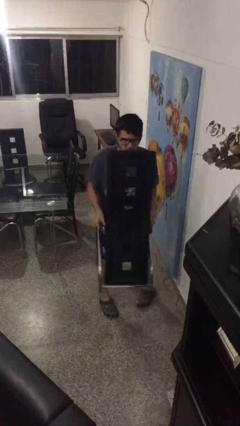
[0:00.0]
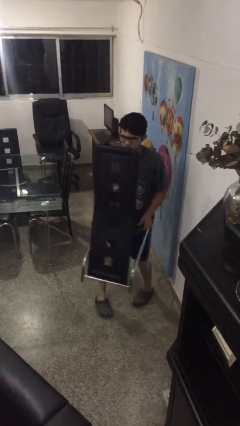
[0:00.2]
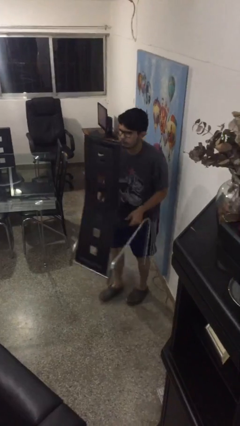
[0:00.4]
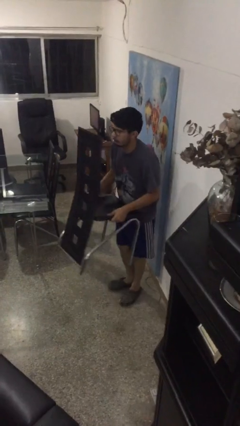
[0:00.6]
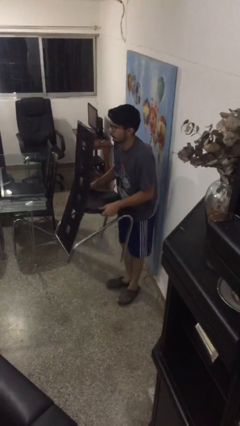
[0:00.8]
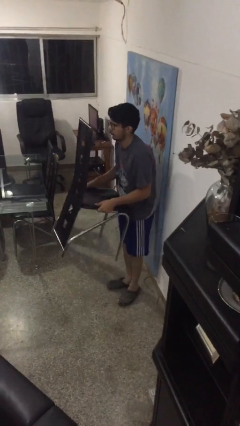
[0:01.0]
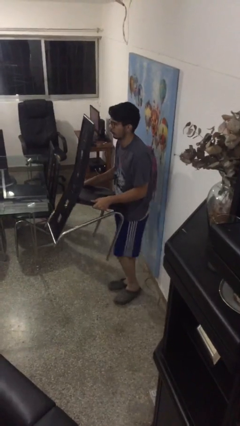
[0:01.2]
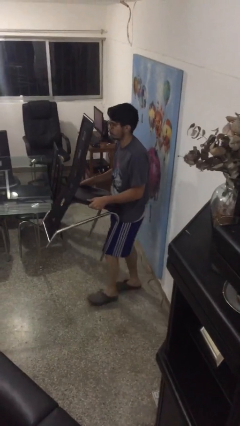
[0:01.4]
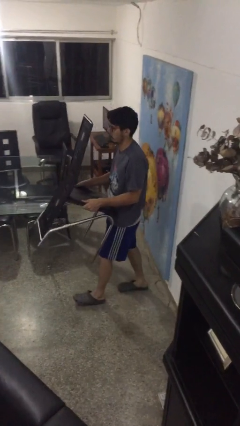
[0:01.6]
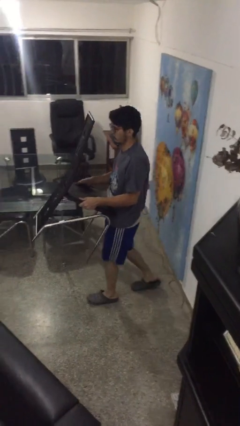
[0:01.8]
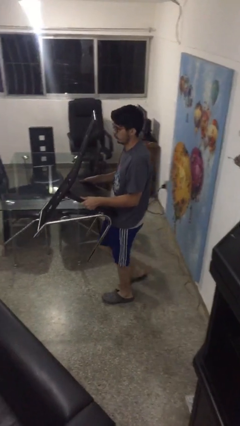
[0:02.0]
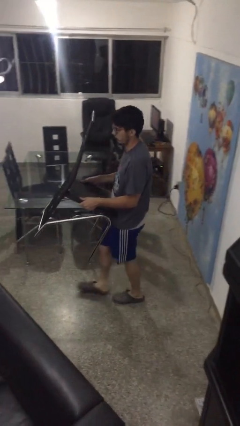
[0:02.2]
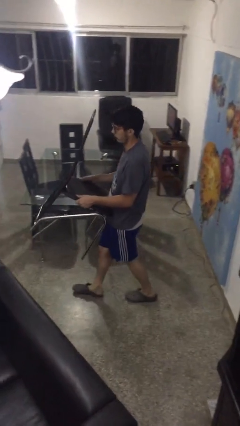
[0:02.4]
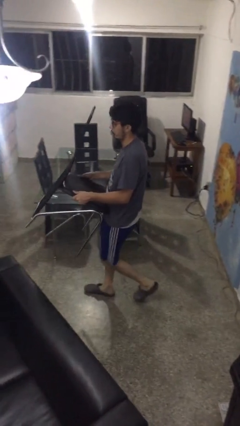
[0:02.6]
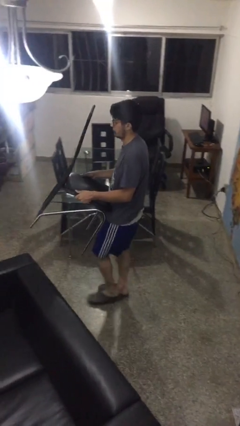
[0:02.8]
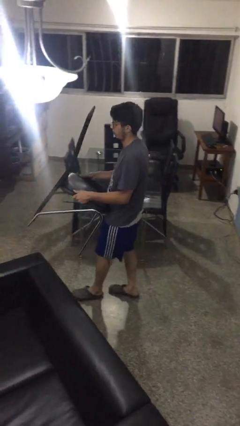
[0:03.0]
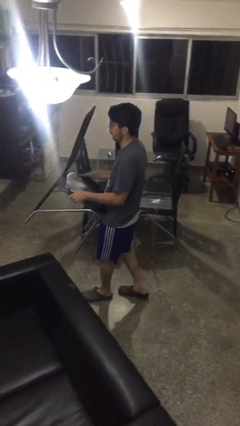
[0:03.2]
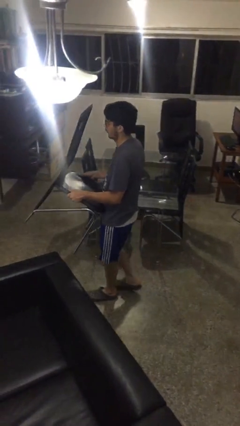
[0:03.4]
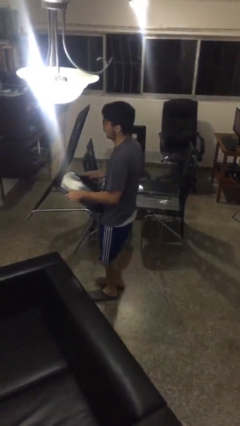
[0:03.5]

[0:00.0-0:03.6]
person carries furniture

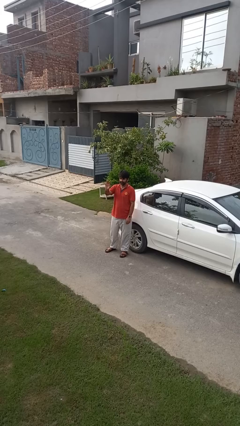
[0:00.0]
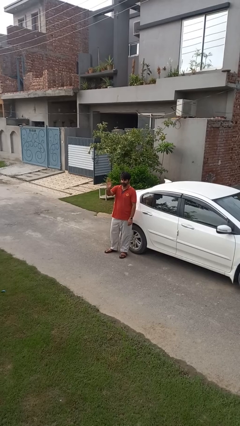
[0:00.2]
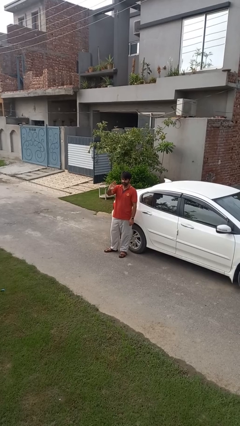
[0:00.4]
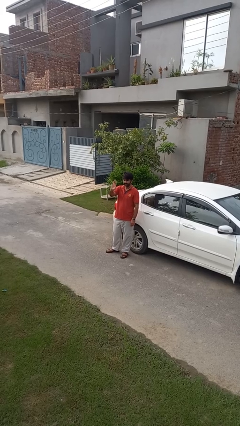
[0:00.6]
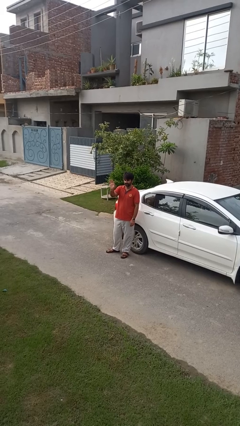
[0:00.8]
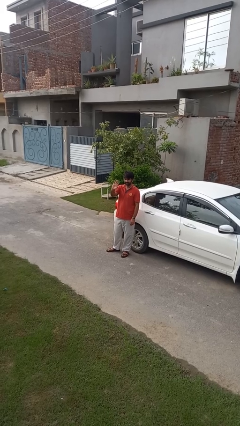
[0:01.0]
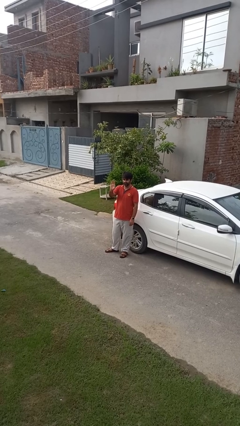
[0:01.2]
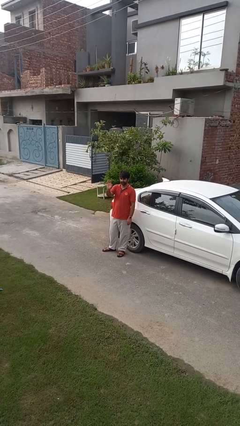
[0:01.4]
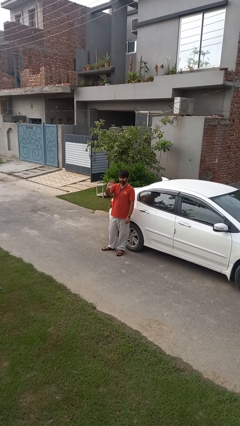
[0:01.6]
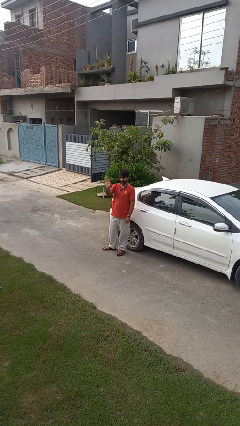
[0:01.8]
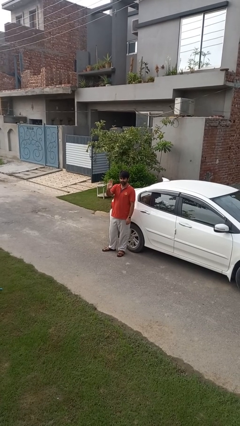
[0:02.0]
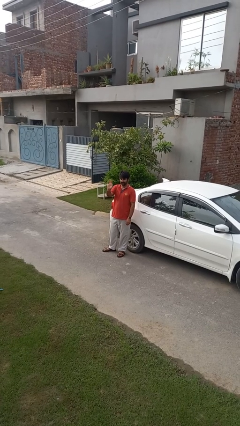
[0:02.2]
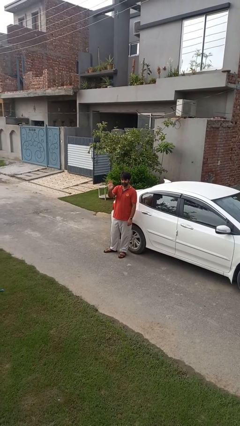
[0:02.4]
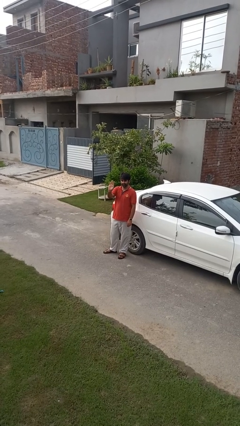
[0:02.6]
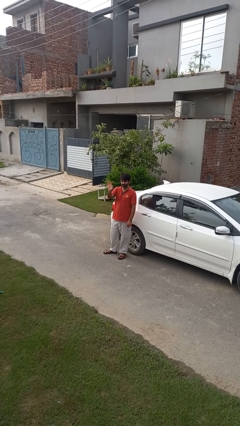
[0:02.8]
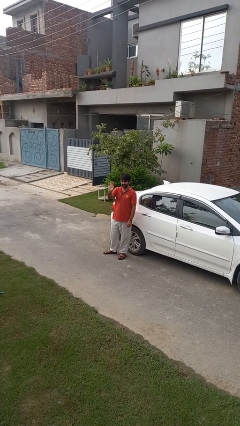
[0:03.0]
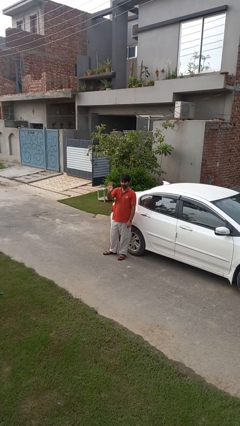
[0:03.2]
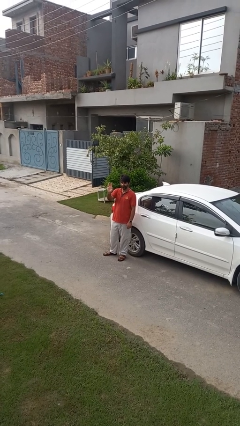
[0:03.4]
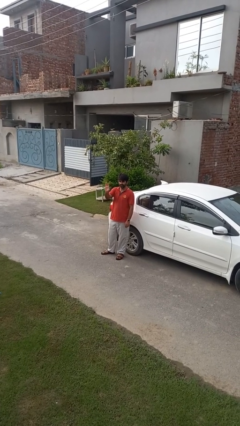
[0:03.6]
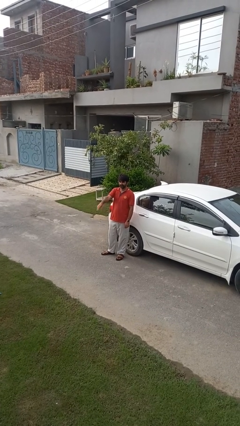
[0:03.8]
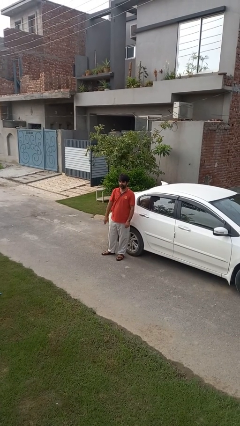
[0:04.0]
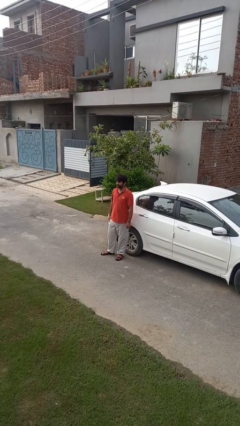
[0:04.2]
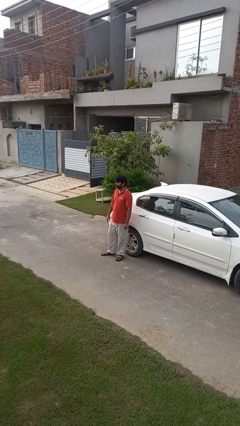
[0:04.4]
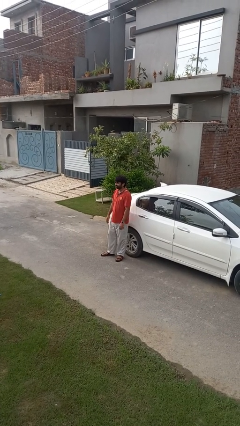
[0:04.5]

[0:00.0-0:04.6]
person waves at person

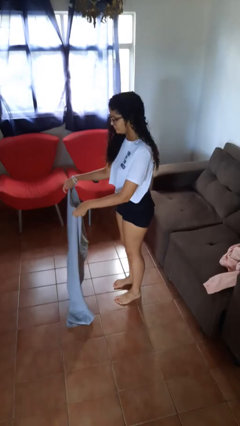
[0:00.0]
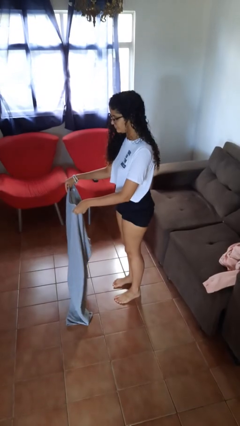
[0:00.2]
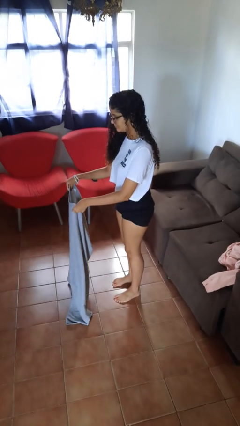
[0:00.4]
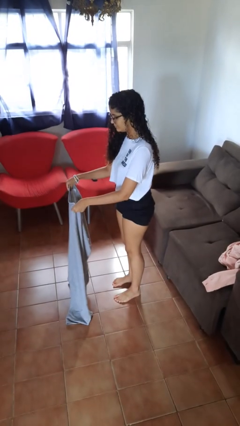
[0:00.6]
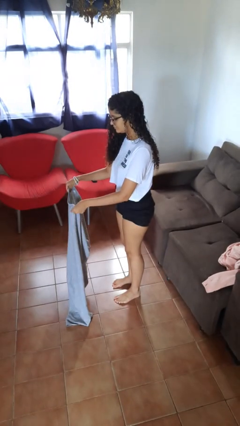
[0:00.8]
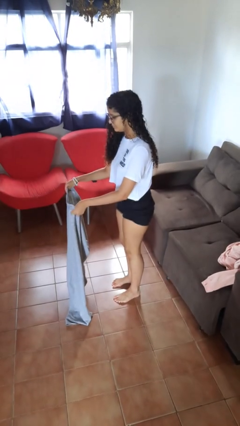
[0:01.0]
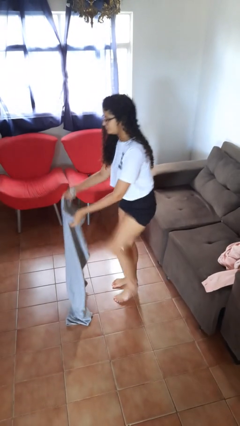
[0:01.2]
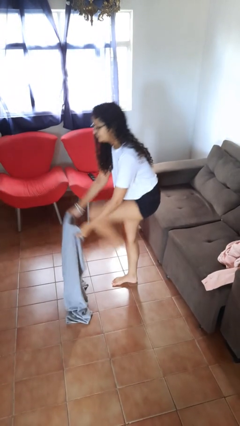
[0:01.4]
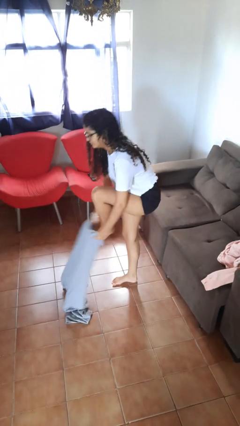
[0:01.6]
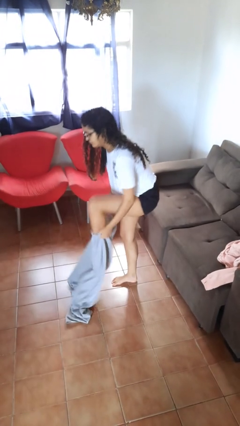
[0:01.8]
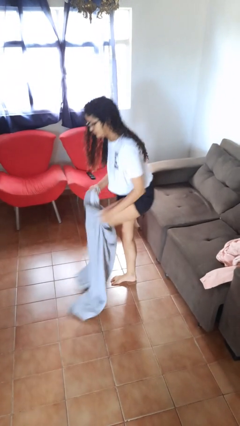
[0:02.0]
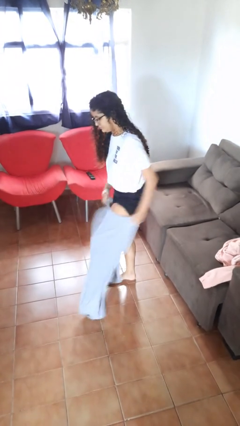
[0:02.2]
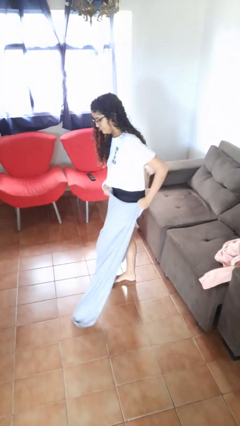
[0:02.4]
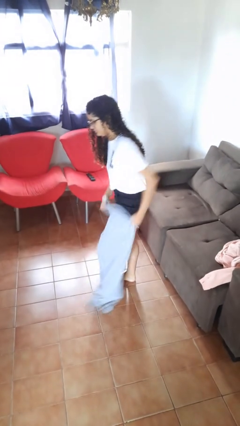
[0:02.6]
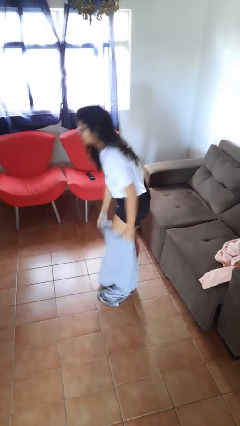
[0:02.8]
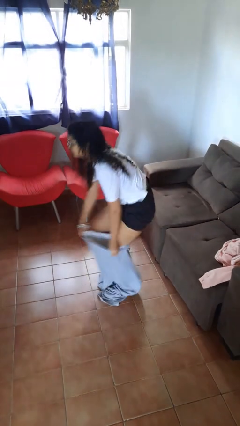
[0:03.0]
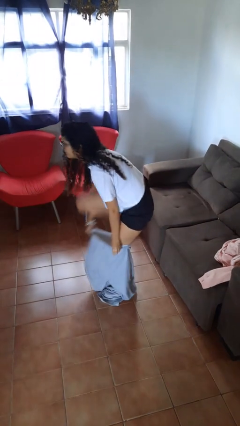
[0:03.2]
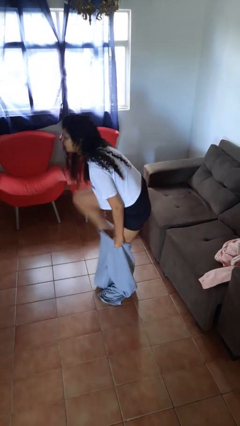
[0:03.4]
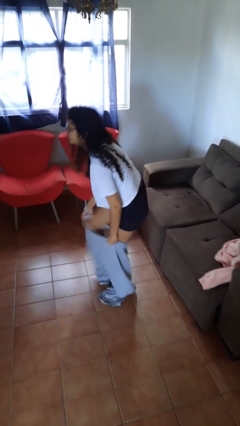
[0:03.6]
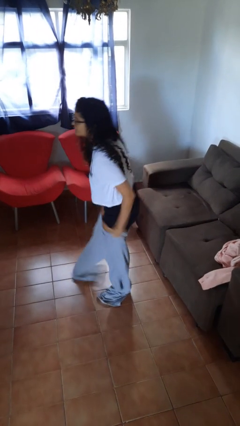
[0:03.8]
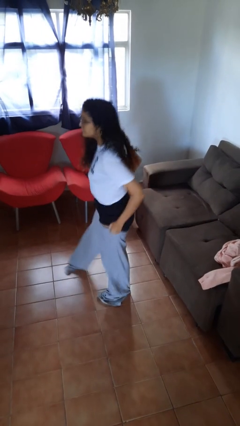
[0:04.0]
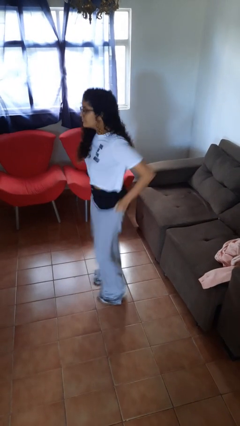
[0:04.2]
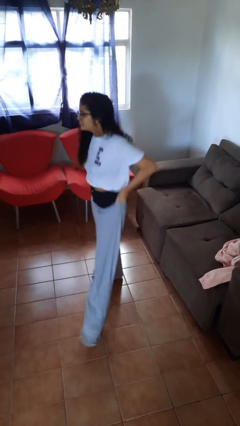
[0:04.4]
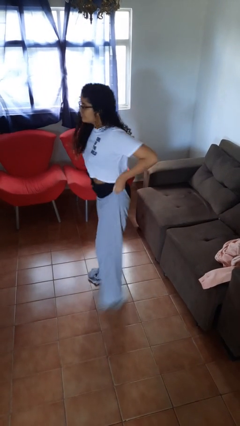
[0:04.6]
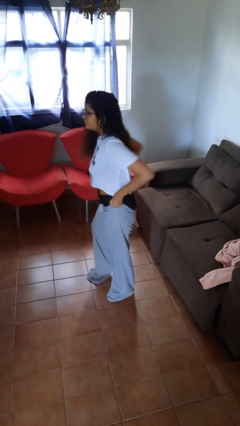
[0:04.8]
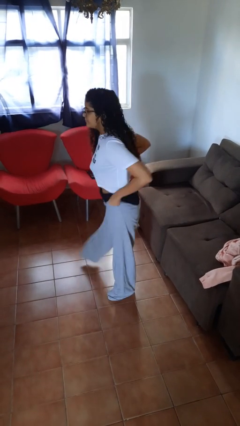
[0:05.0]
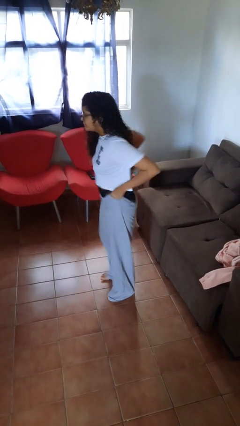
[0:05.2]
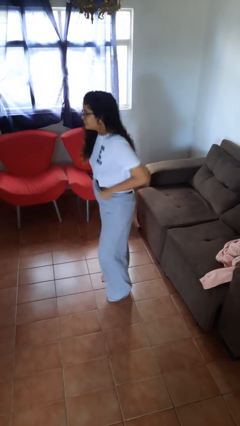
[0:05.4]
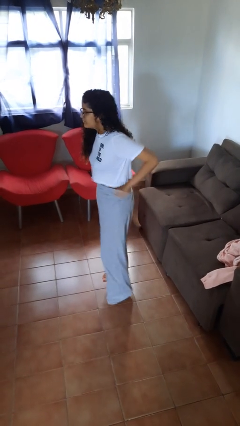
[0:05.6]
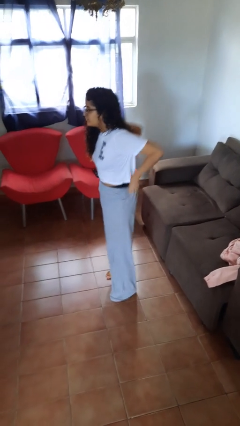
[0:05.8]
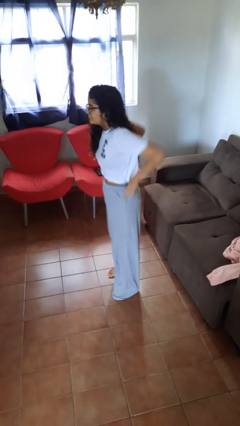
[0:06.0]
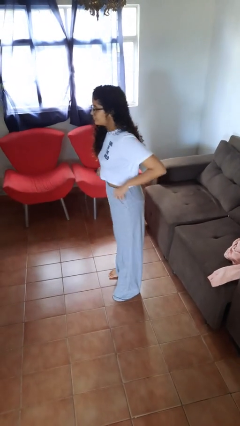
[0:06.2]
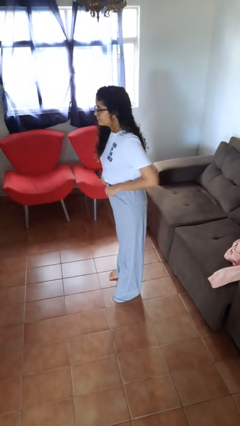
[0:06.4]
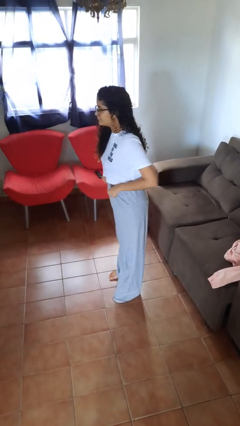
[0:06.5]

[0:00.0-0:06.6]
person puts on pants

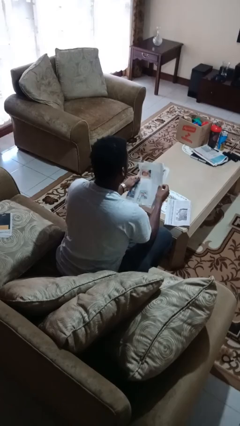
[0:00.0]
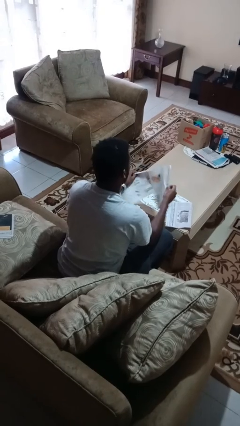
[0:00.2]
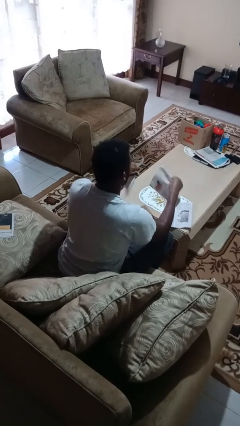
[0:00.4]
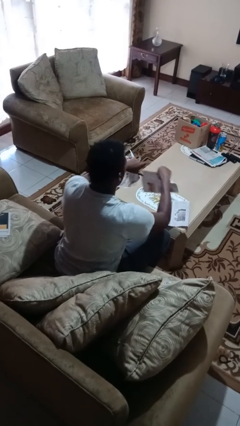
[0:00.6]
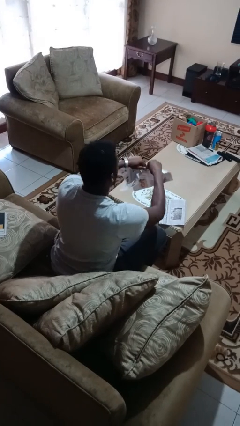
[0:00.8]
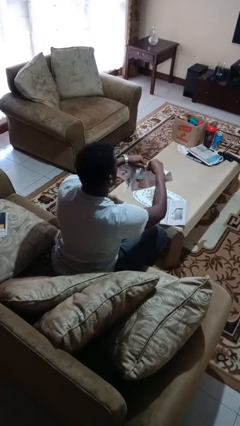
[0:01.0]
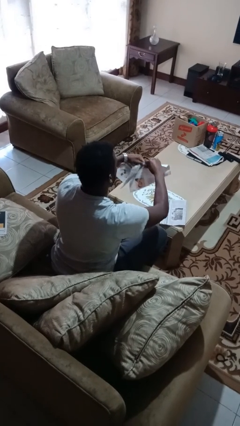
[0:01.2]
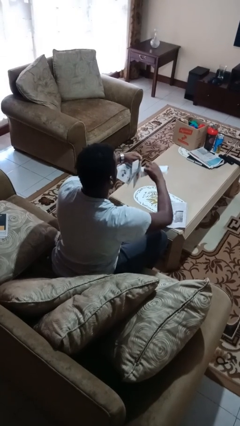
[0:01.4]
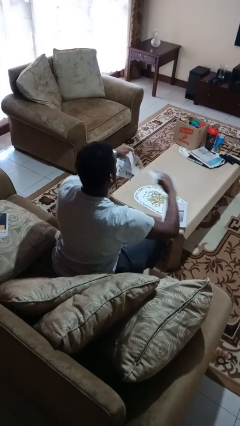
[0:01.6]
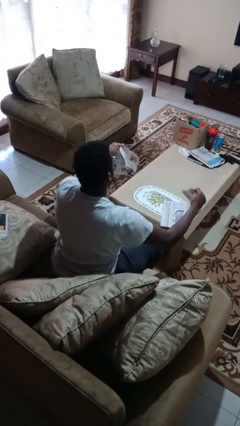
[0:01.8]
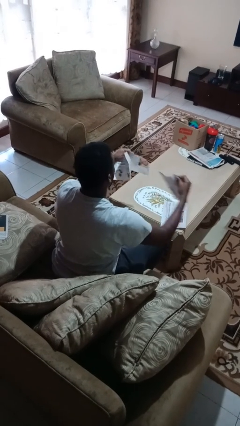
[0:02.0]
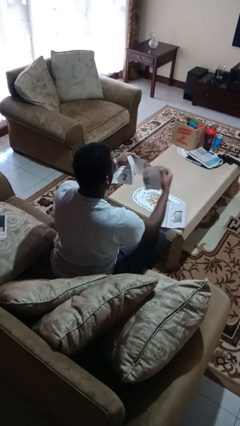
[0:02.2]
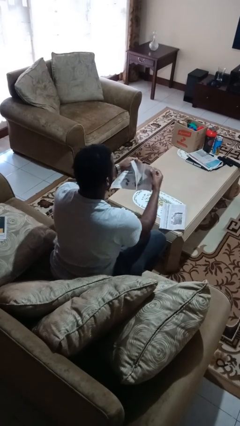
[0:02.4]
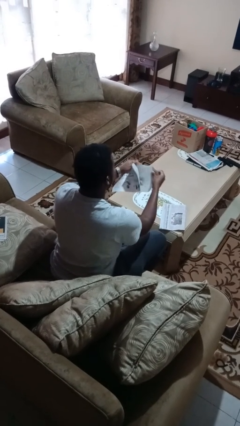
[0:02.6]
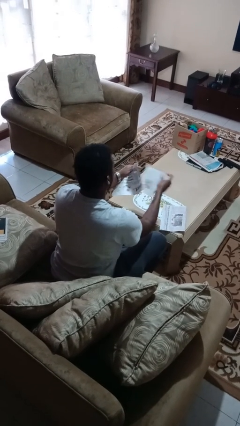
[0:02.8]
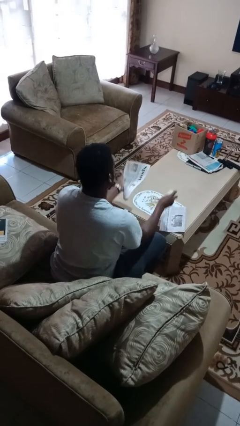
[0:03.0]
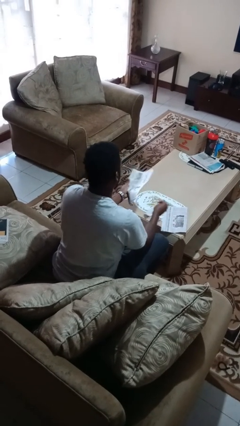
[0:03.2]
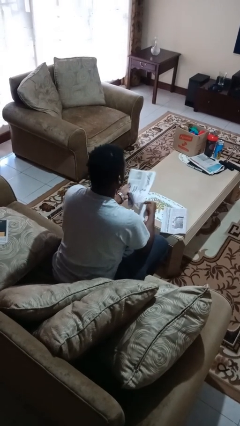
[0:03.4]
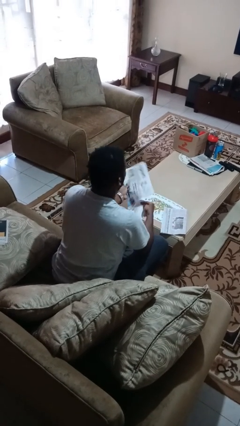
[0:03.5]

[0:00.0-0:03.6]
person tears paper
